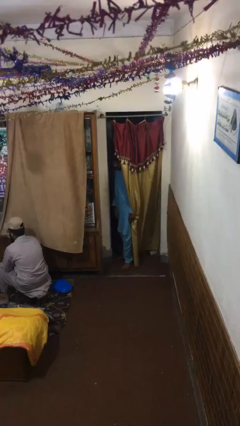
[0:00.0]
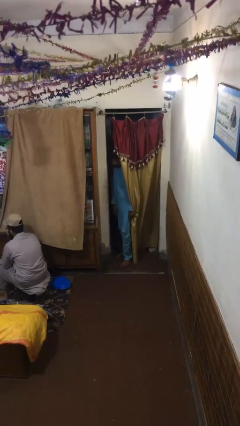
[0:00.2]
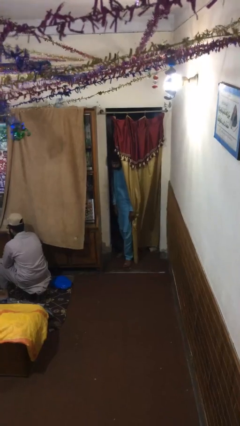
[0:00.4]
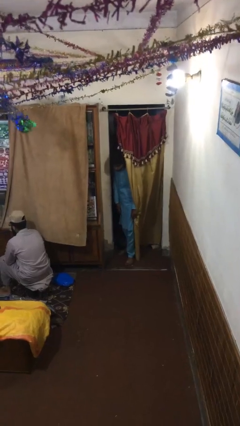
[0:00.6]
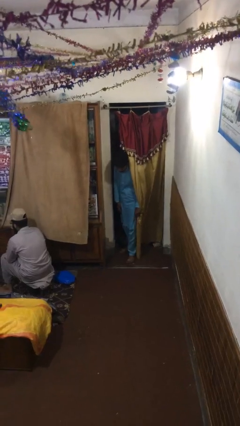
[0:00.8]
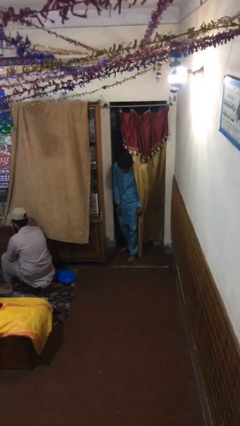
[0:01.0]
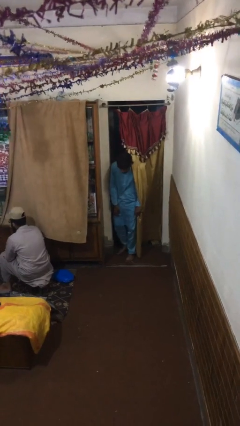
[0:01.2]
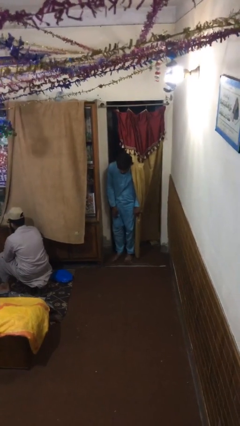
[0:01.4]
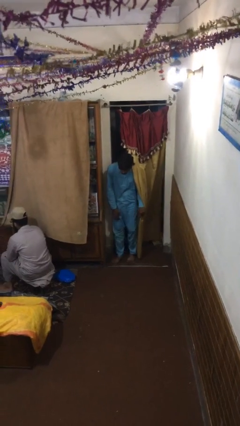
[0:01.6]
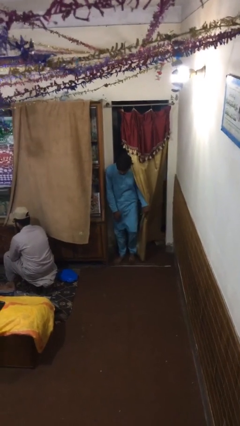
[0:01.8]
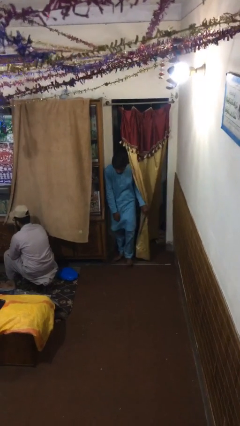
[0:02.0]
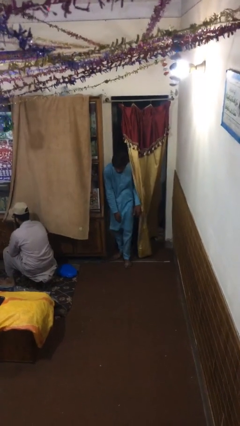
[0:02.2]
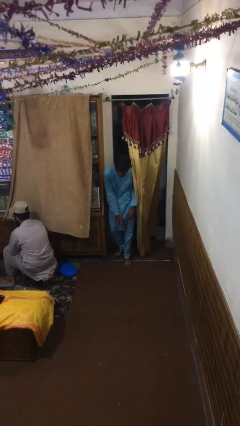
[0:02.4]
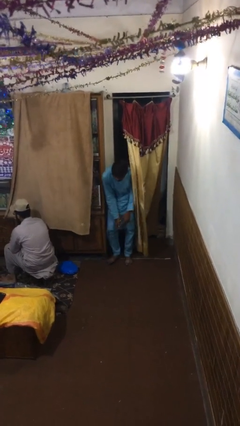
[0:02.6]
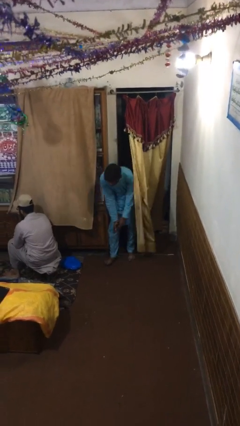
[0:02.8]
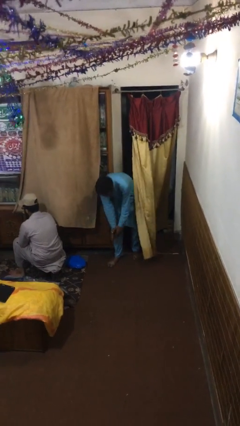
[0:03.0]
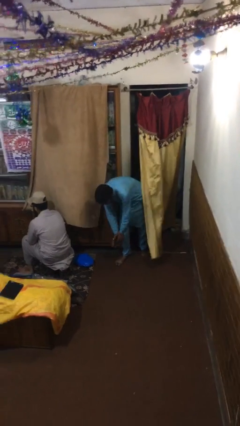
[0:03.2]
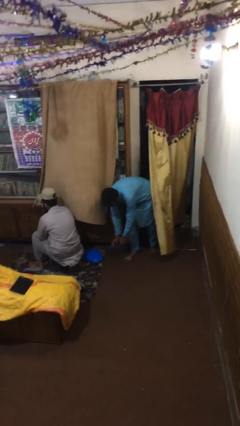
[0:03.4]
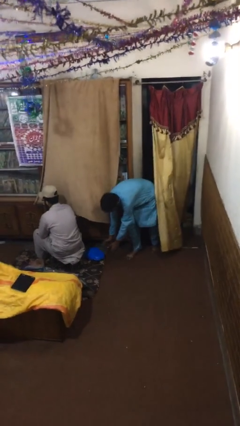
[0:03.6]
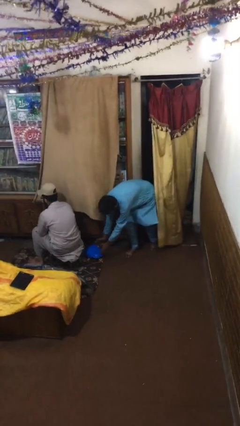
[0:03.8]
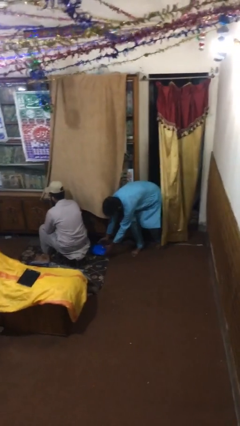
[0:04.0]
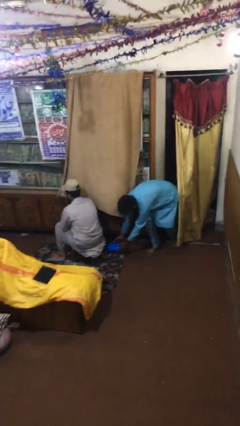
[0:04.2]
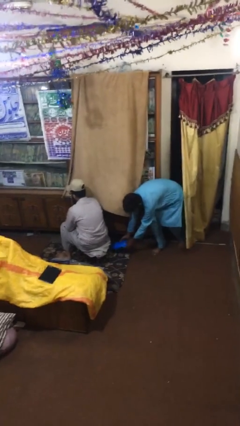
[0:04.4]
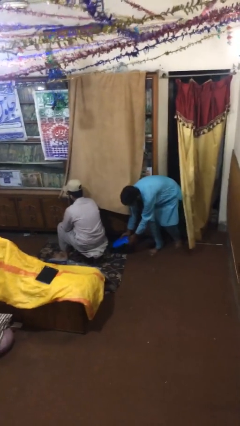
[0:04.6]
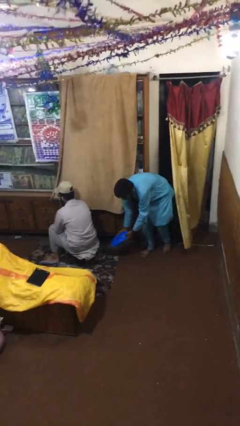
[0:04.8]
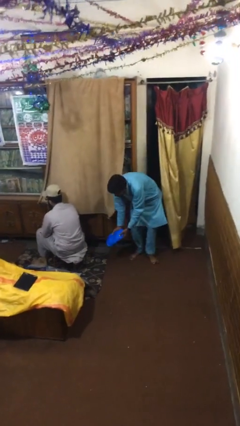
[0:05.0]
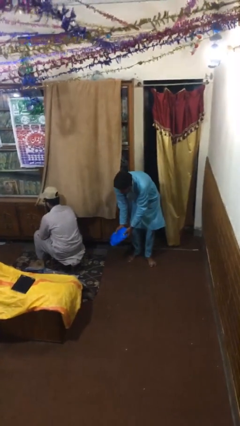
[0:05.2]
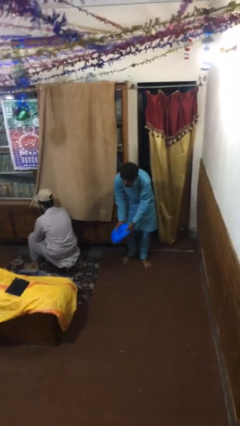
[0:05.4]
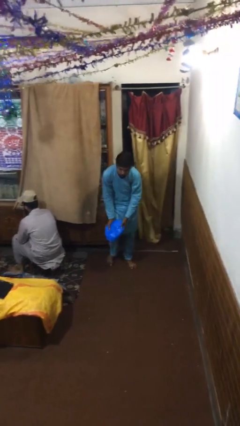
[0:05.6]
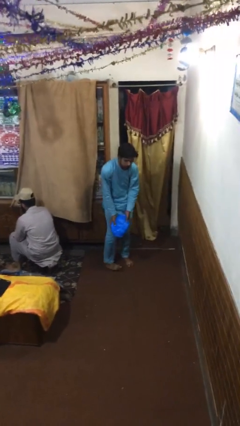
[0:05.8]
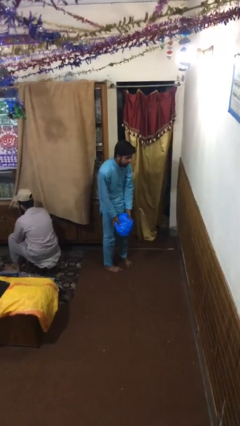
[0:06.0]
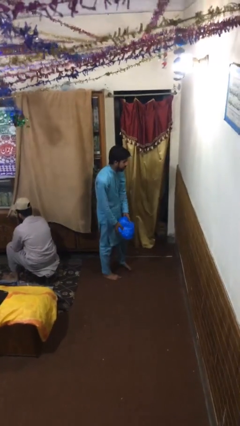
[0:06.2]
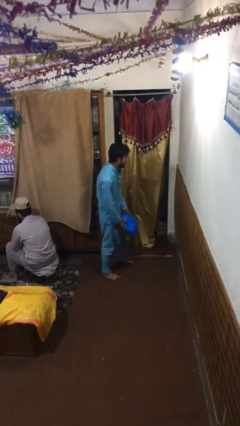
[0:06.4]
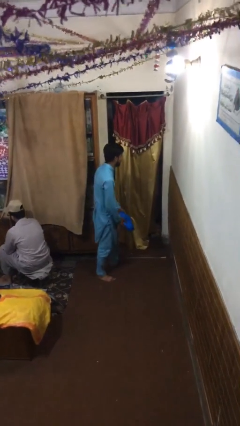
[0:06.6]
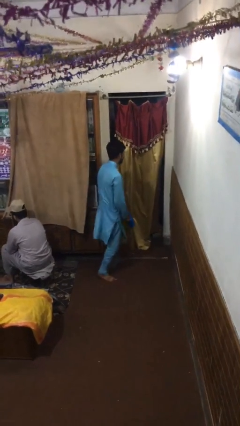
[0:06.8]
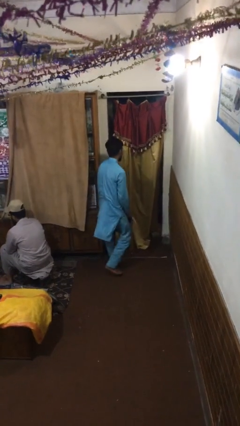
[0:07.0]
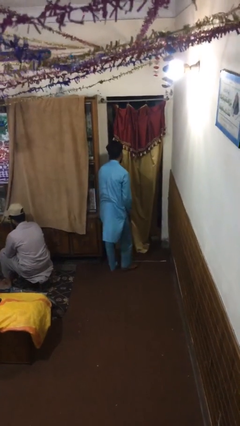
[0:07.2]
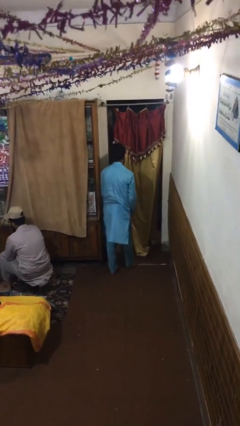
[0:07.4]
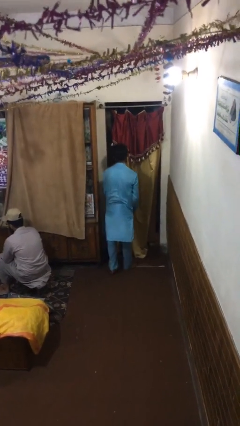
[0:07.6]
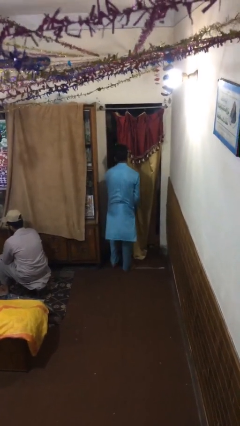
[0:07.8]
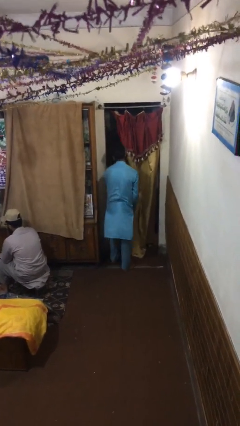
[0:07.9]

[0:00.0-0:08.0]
person steals object from person

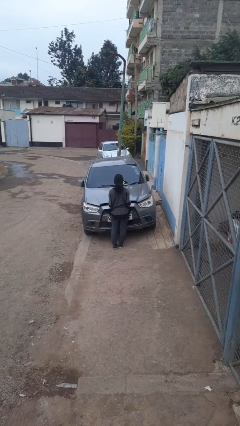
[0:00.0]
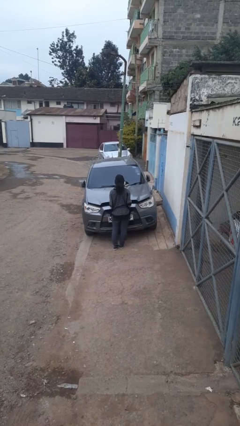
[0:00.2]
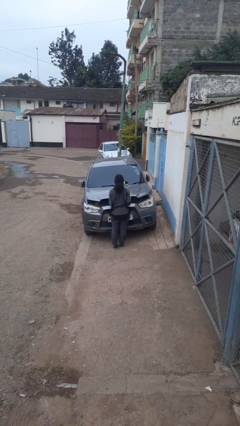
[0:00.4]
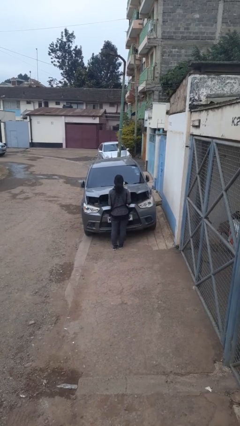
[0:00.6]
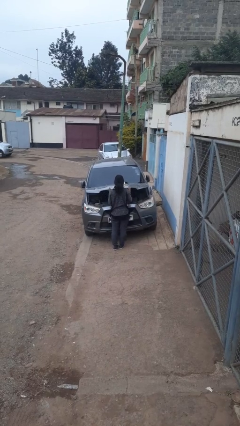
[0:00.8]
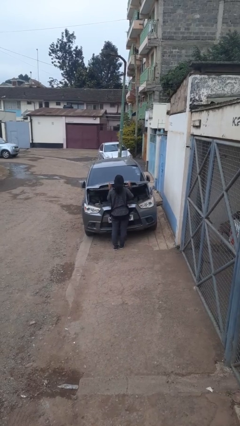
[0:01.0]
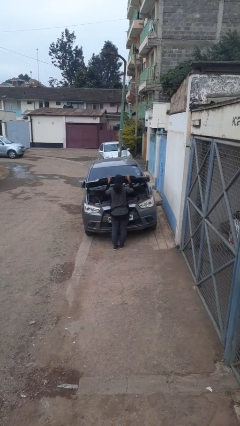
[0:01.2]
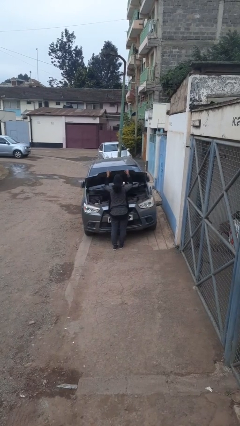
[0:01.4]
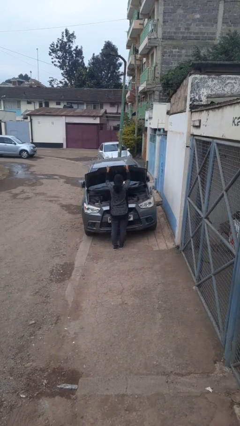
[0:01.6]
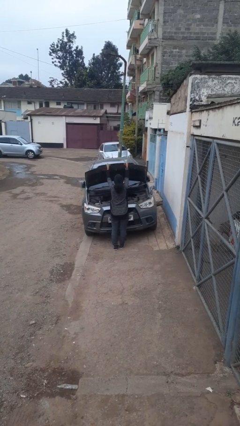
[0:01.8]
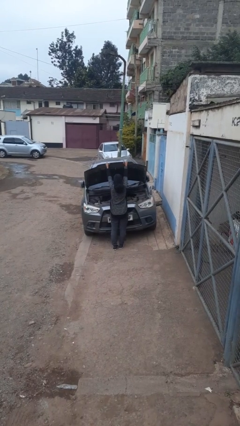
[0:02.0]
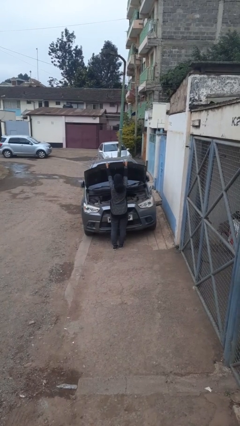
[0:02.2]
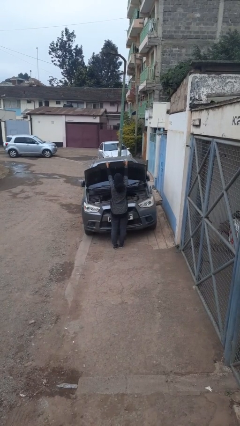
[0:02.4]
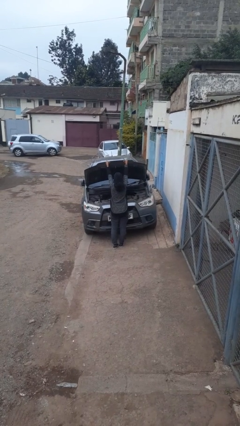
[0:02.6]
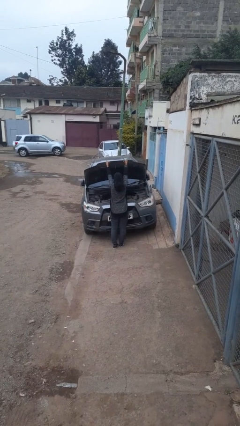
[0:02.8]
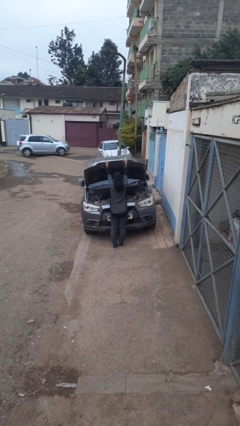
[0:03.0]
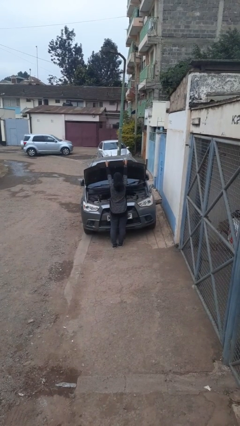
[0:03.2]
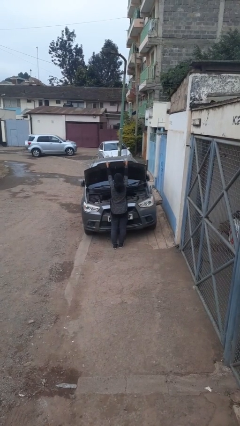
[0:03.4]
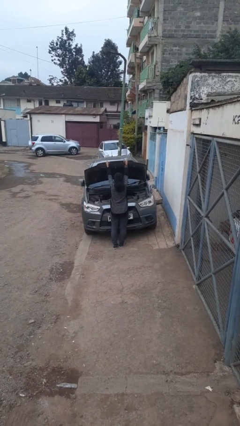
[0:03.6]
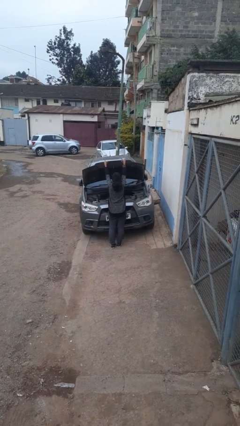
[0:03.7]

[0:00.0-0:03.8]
person opens car hood

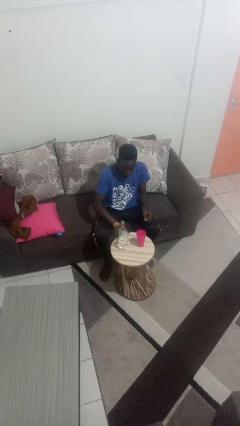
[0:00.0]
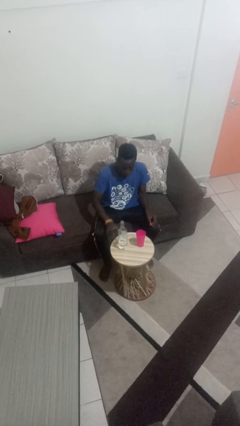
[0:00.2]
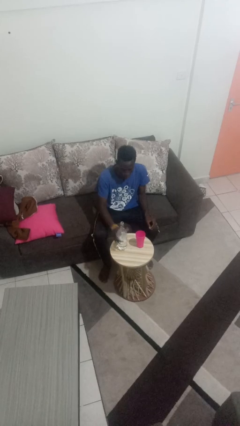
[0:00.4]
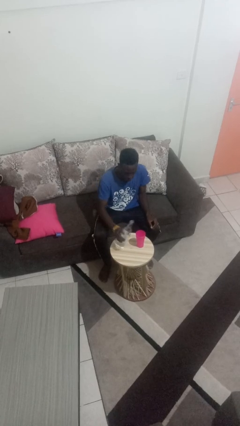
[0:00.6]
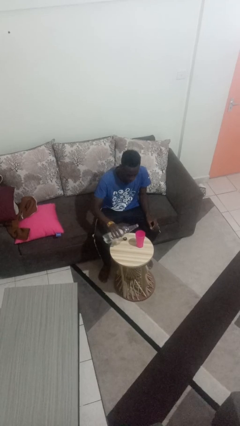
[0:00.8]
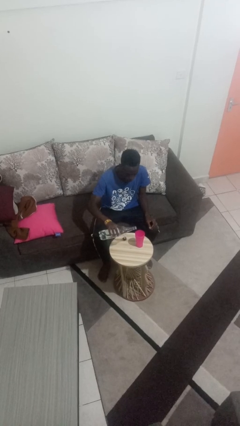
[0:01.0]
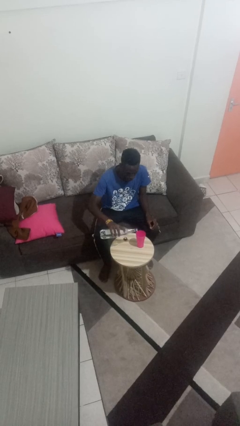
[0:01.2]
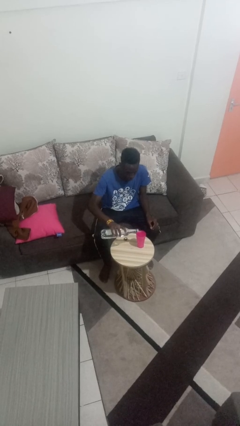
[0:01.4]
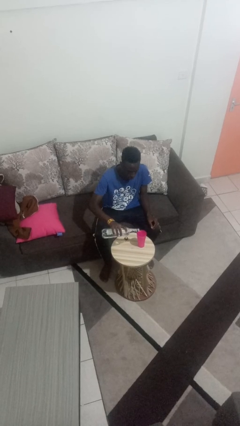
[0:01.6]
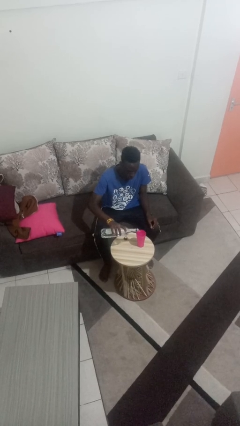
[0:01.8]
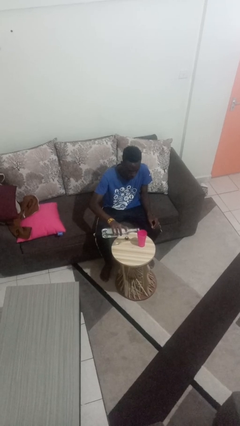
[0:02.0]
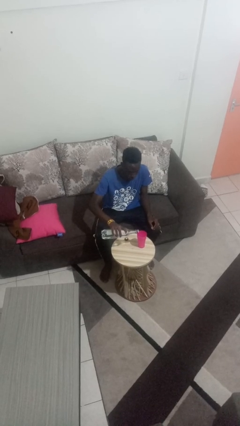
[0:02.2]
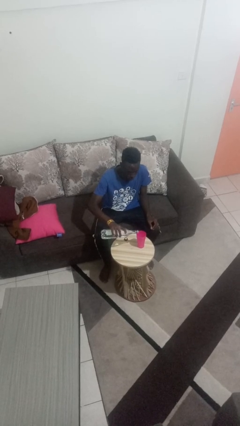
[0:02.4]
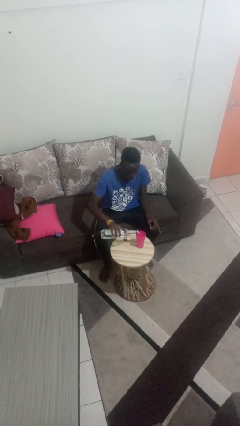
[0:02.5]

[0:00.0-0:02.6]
person pours liquid into cup

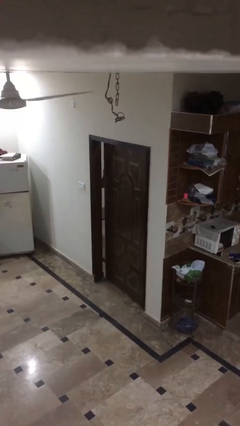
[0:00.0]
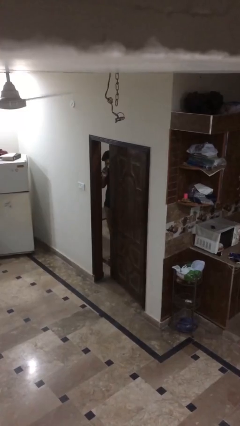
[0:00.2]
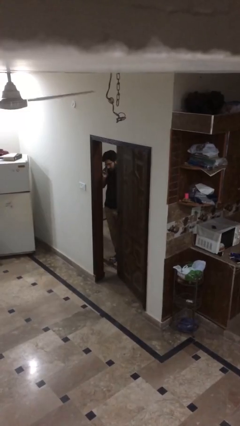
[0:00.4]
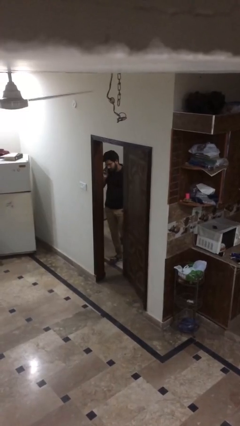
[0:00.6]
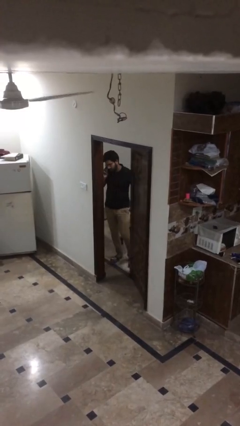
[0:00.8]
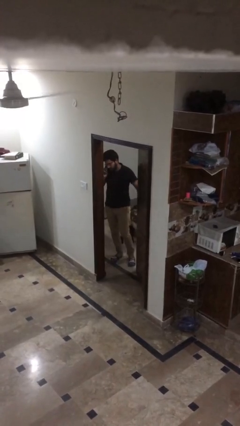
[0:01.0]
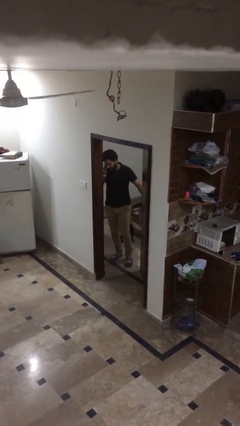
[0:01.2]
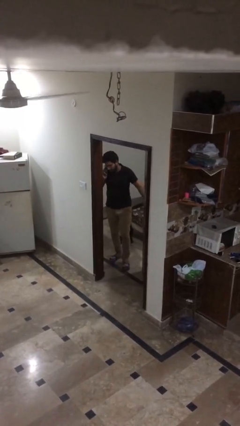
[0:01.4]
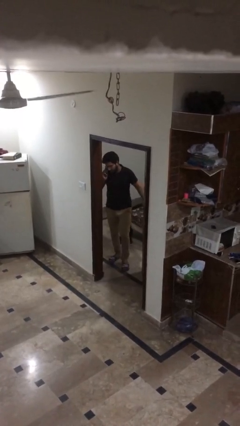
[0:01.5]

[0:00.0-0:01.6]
person opens facility door

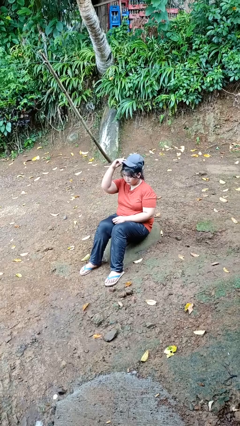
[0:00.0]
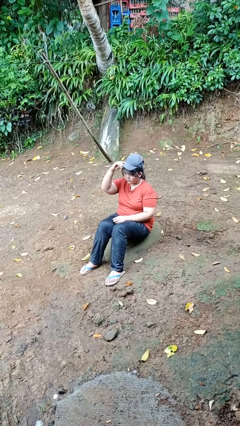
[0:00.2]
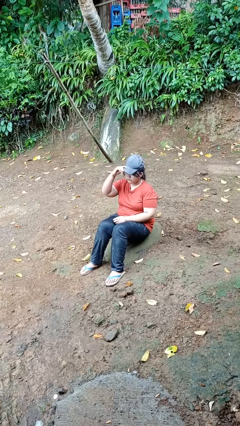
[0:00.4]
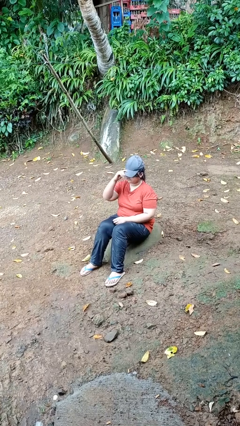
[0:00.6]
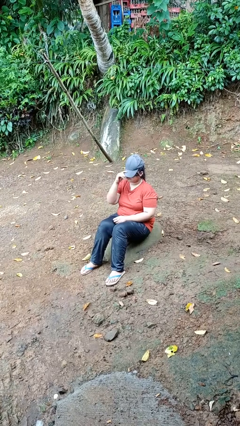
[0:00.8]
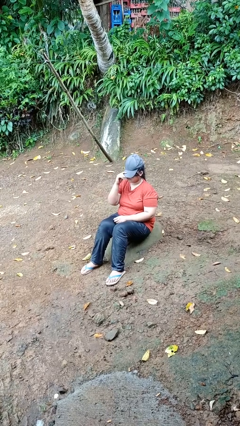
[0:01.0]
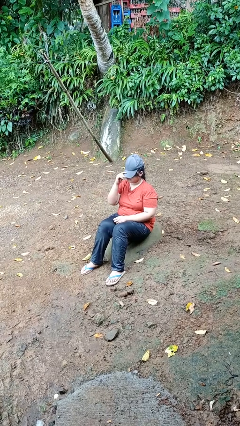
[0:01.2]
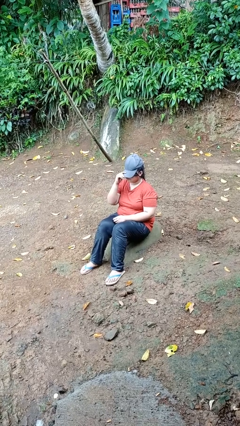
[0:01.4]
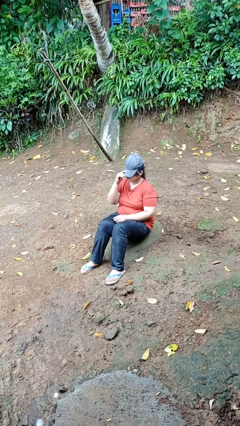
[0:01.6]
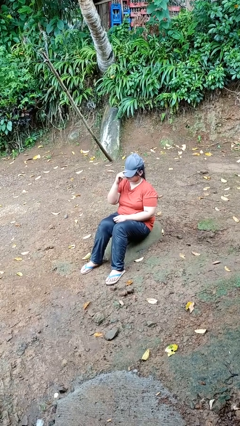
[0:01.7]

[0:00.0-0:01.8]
person puts on hat
